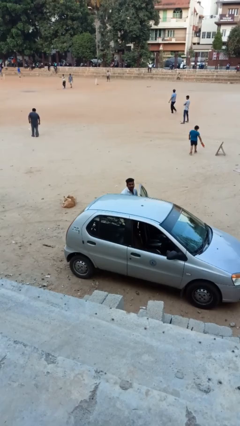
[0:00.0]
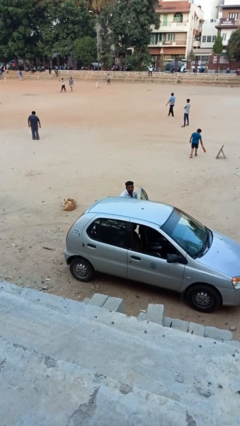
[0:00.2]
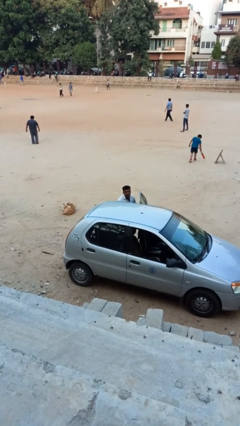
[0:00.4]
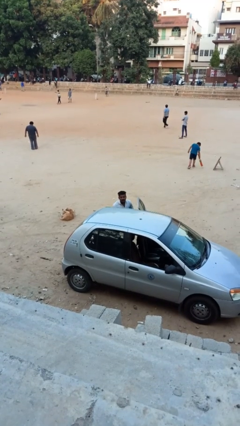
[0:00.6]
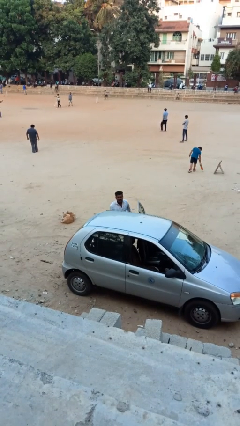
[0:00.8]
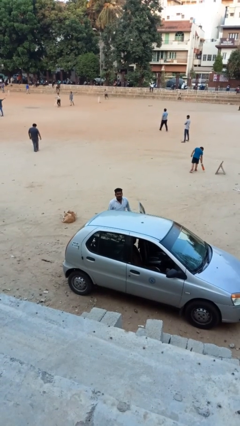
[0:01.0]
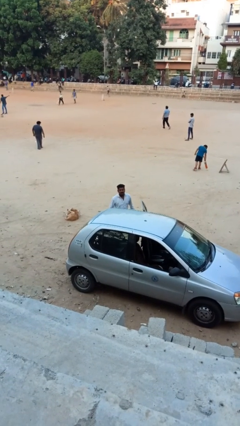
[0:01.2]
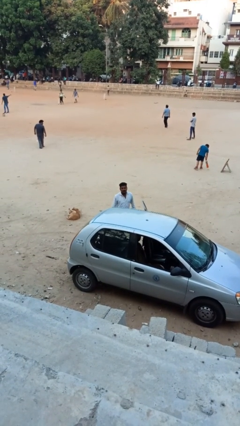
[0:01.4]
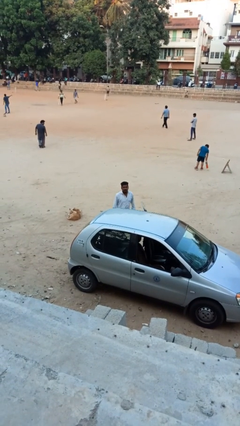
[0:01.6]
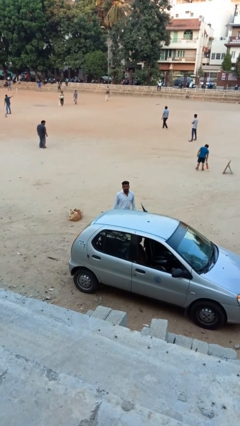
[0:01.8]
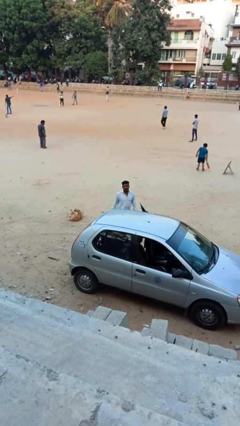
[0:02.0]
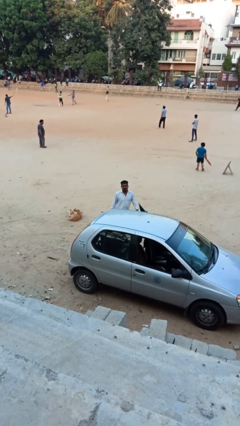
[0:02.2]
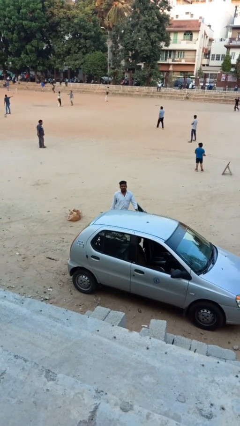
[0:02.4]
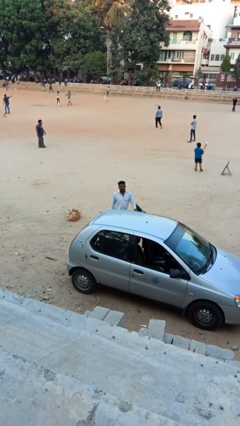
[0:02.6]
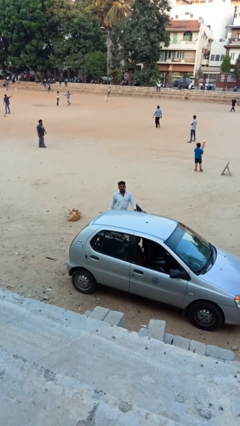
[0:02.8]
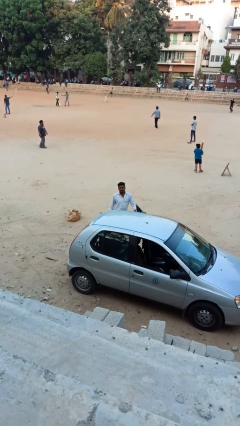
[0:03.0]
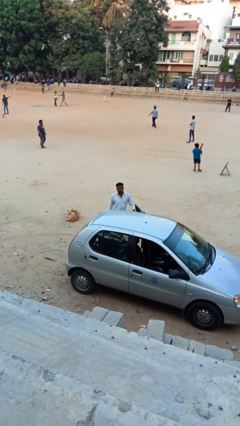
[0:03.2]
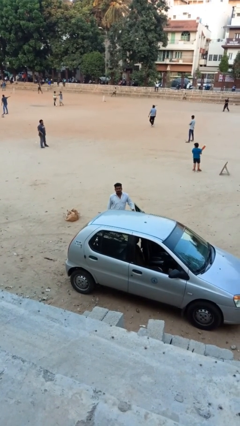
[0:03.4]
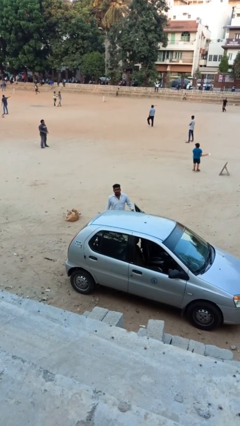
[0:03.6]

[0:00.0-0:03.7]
person exits car

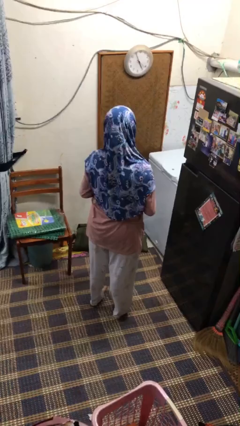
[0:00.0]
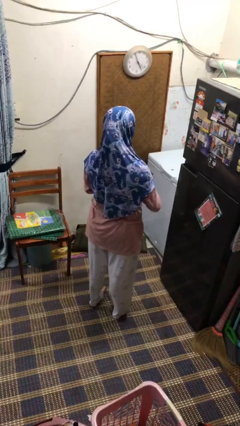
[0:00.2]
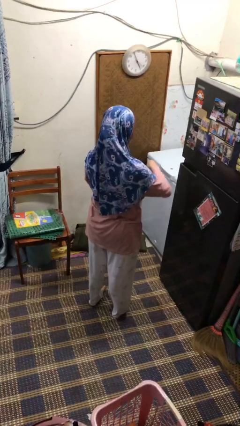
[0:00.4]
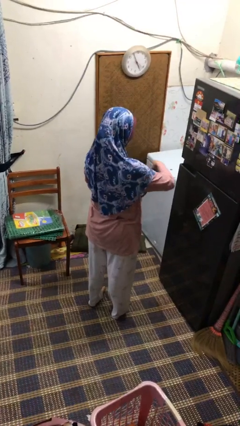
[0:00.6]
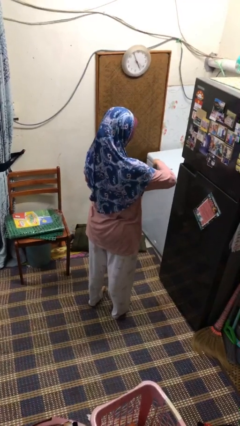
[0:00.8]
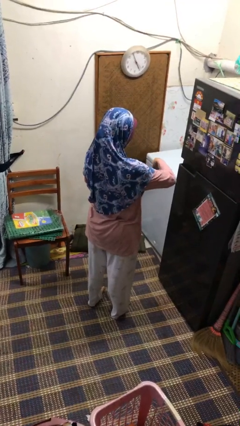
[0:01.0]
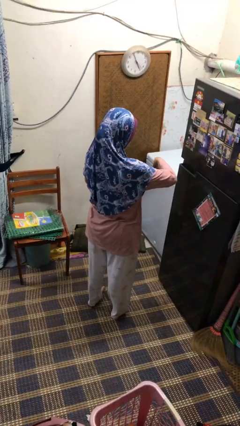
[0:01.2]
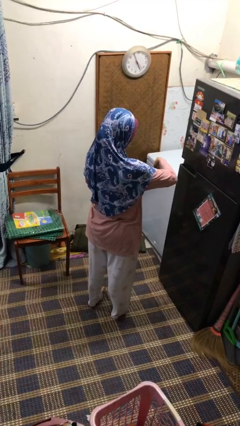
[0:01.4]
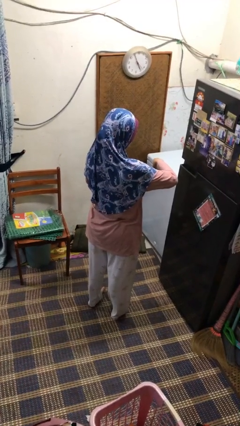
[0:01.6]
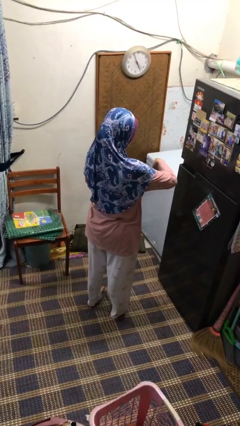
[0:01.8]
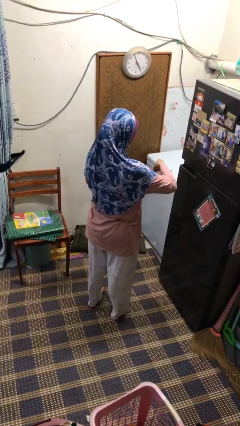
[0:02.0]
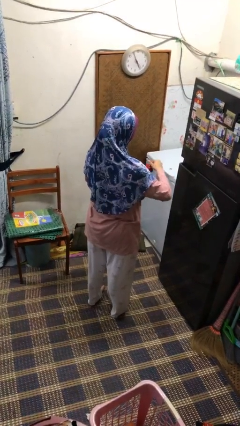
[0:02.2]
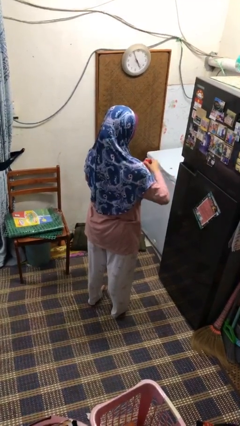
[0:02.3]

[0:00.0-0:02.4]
person opens beverage can

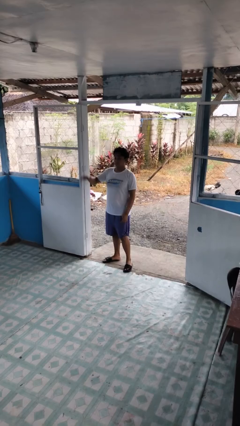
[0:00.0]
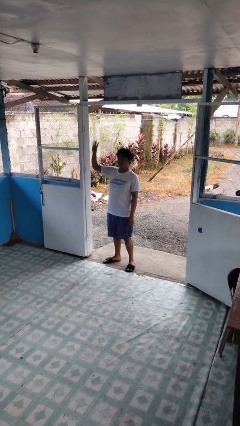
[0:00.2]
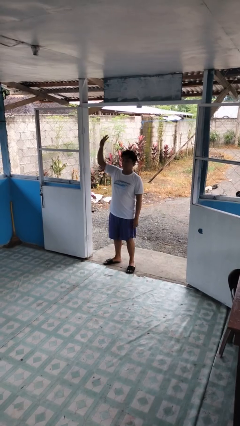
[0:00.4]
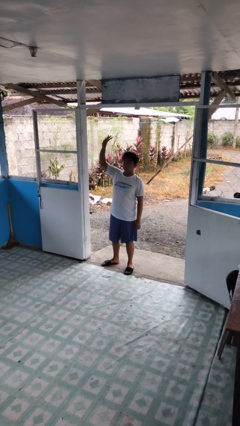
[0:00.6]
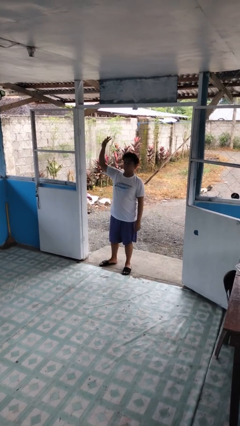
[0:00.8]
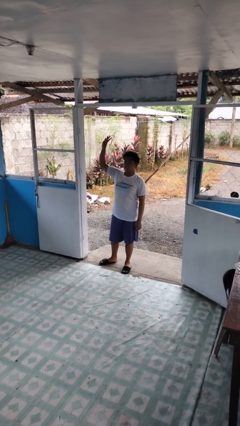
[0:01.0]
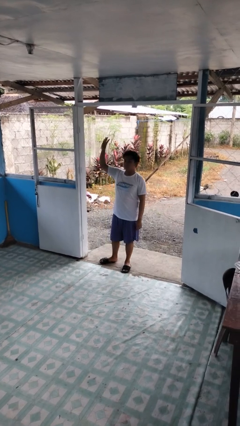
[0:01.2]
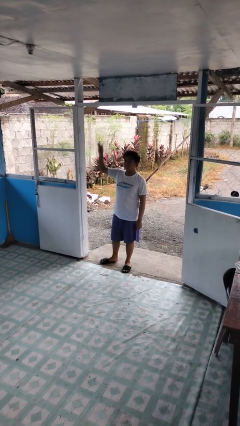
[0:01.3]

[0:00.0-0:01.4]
person gestures number four

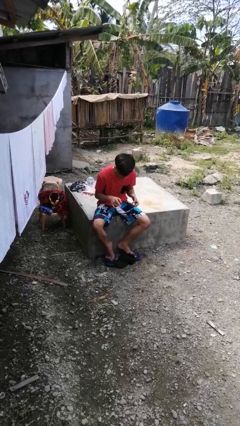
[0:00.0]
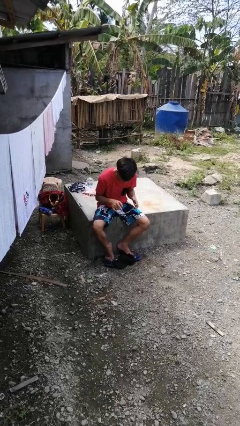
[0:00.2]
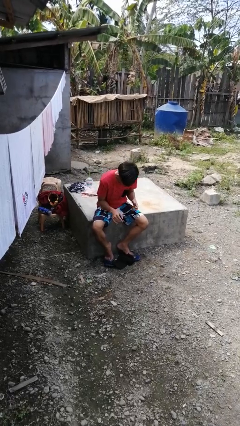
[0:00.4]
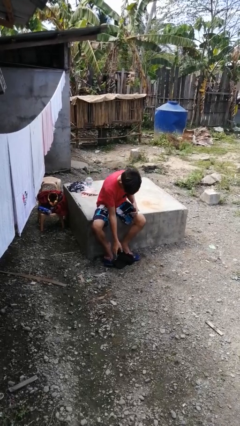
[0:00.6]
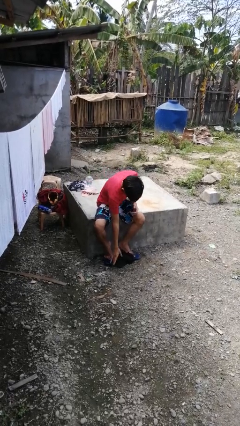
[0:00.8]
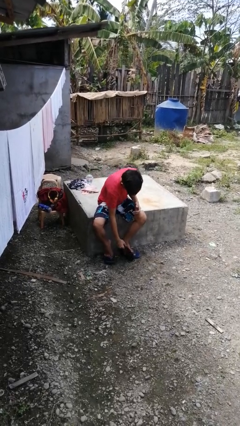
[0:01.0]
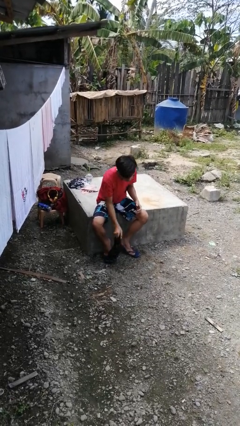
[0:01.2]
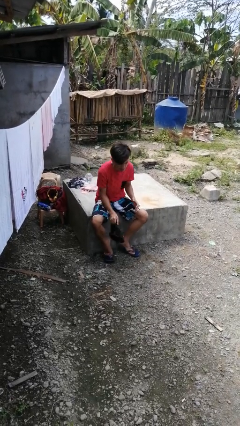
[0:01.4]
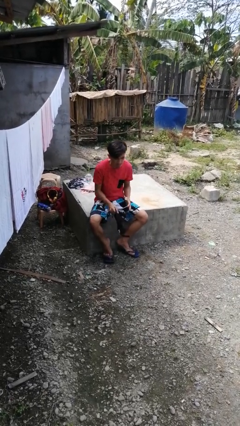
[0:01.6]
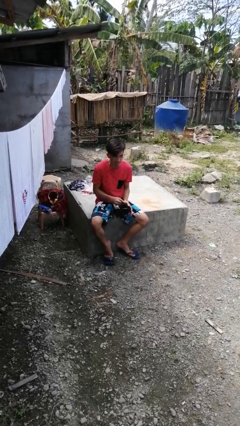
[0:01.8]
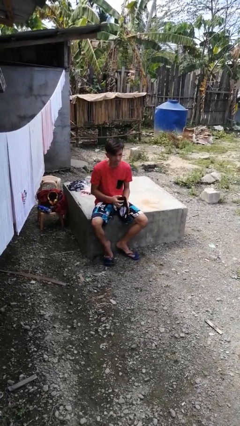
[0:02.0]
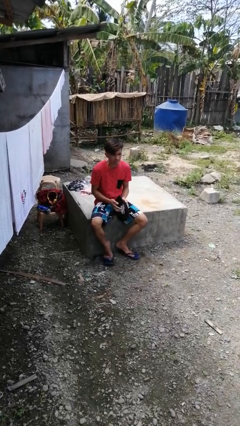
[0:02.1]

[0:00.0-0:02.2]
person picks up object from floor

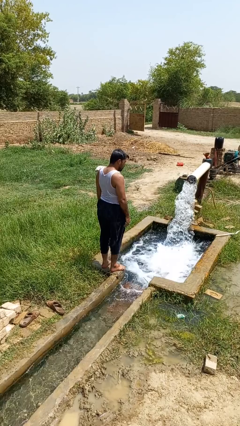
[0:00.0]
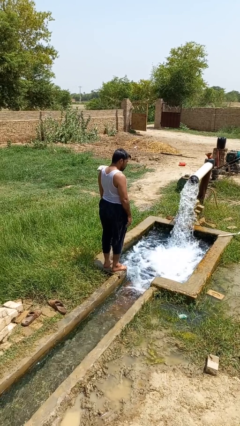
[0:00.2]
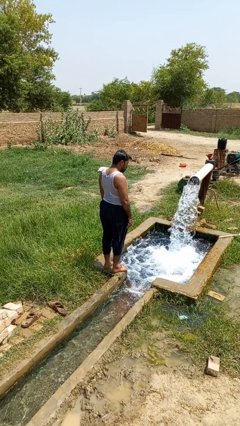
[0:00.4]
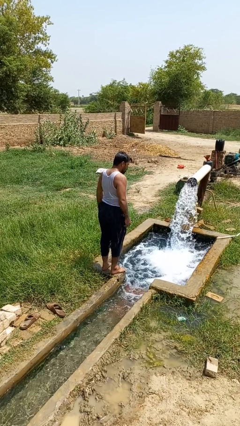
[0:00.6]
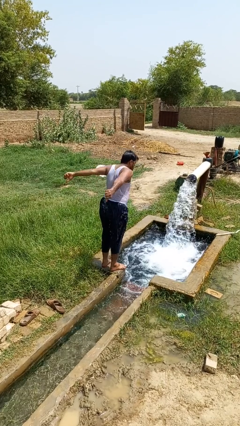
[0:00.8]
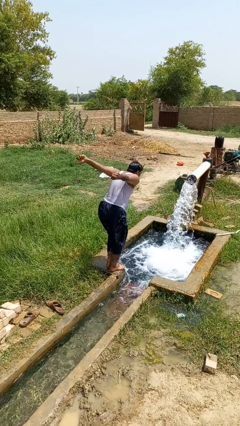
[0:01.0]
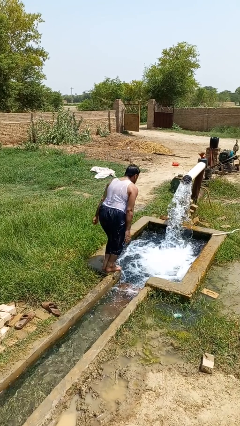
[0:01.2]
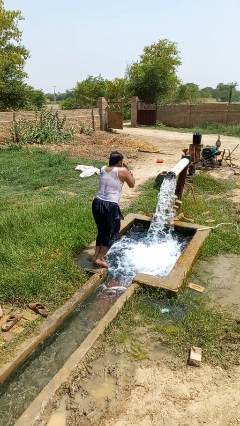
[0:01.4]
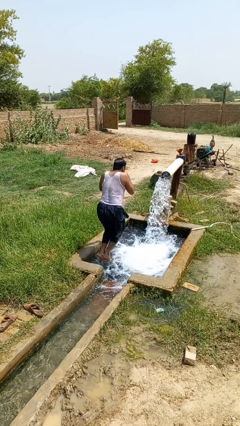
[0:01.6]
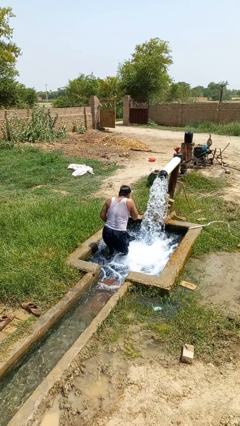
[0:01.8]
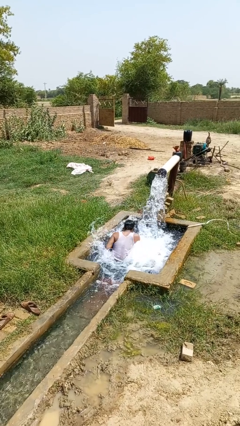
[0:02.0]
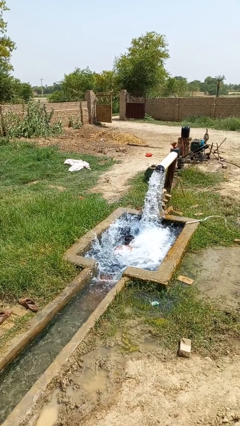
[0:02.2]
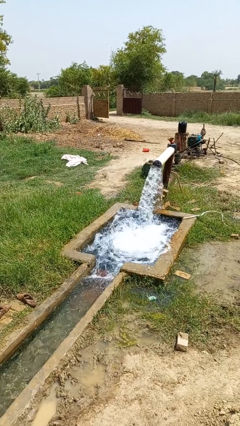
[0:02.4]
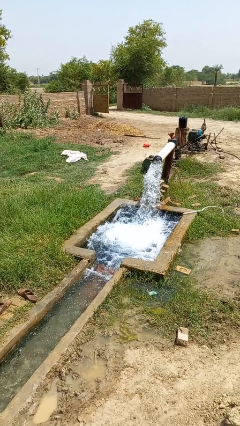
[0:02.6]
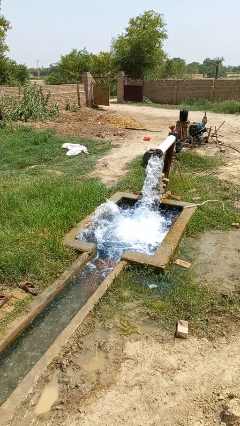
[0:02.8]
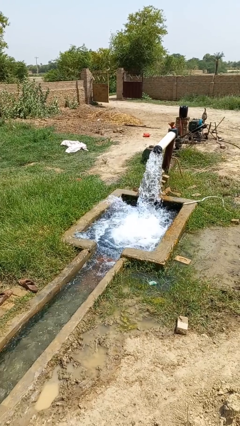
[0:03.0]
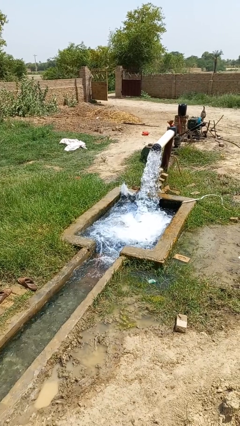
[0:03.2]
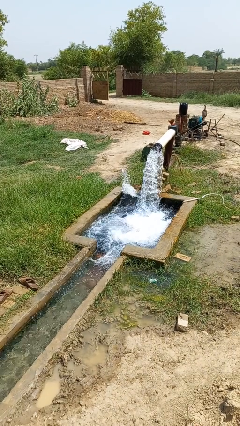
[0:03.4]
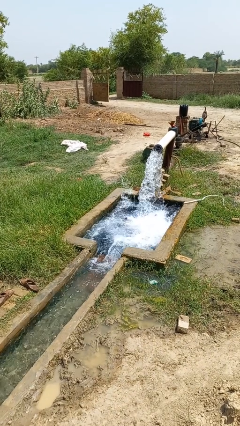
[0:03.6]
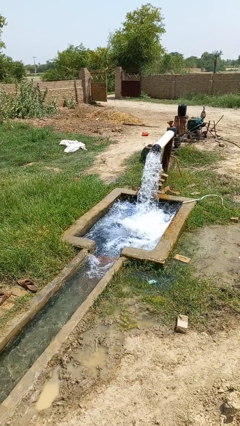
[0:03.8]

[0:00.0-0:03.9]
person jumps into pool

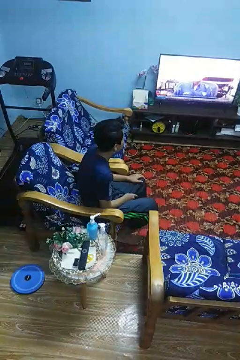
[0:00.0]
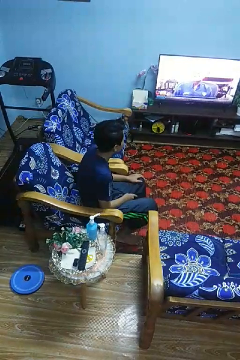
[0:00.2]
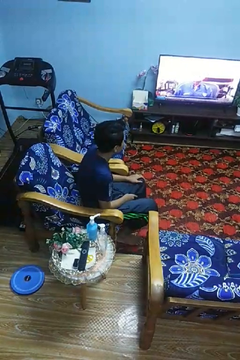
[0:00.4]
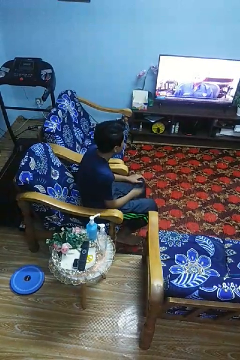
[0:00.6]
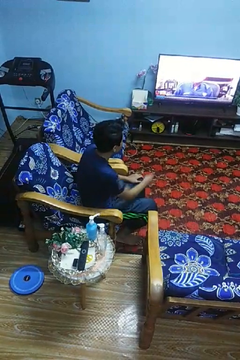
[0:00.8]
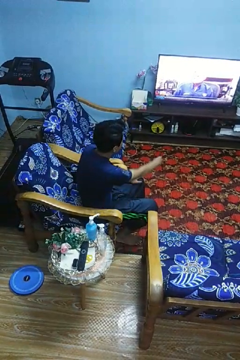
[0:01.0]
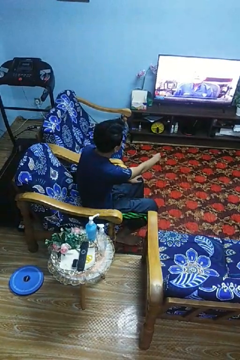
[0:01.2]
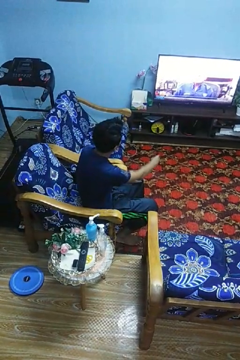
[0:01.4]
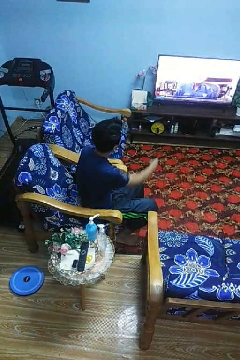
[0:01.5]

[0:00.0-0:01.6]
person uses television remote

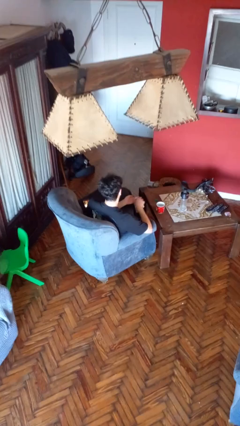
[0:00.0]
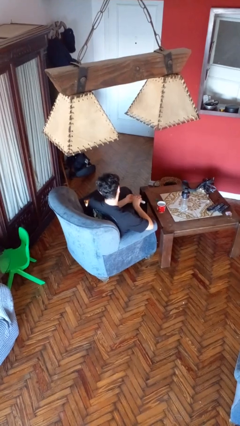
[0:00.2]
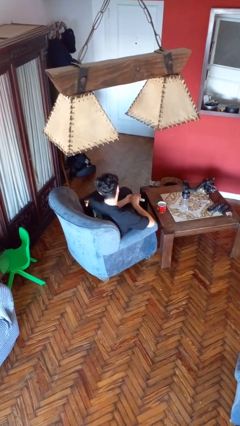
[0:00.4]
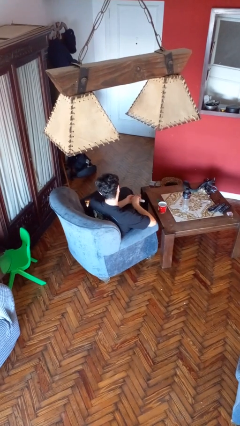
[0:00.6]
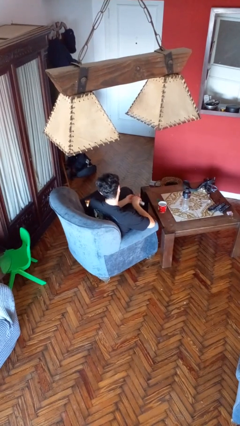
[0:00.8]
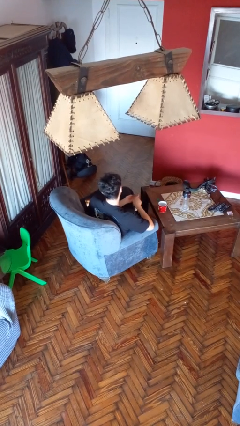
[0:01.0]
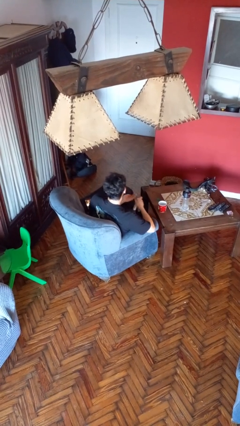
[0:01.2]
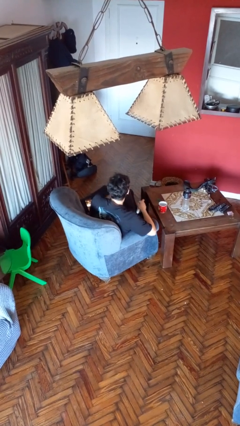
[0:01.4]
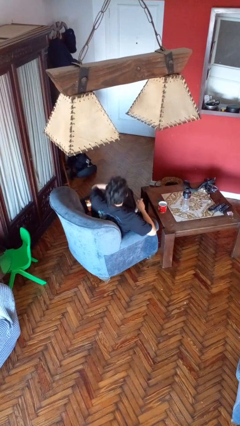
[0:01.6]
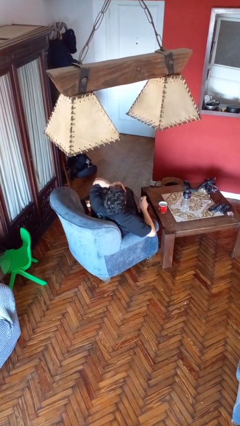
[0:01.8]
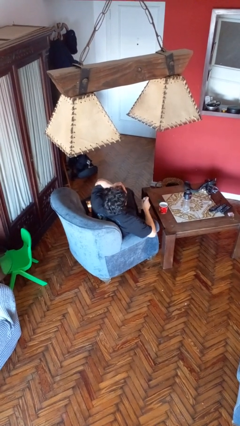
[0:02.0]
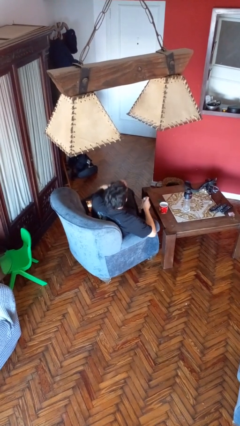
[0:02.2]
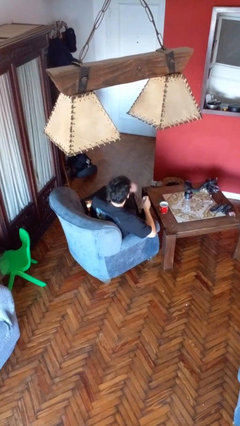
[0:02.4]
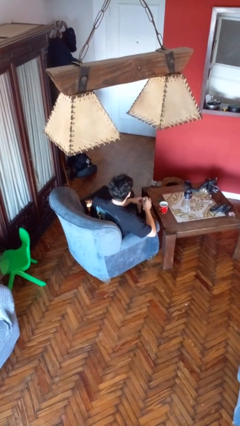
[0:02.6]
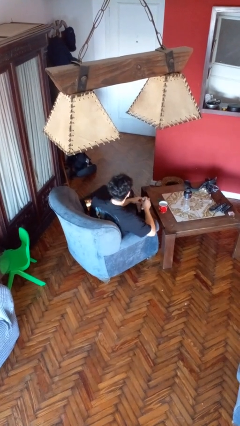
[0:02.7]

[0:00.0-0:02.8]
person takes medicine pills
